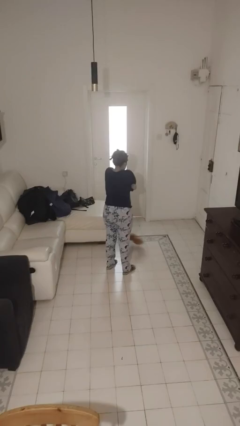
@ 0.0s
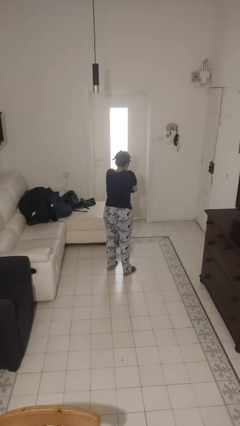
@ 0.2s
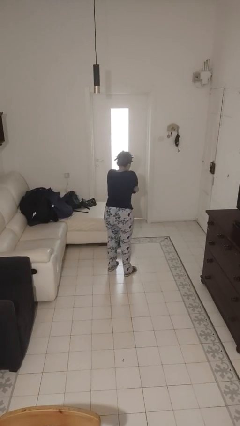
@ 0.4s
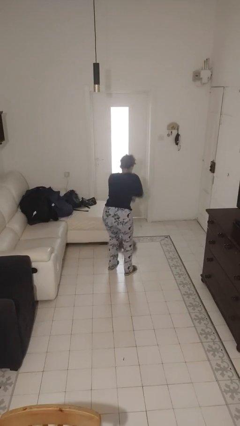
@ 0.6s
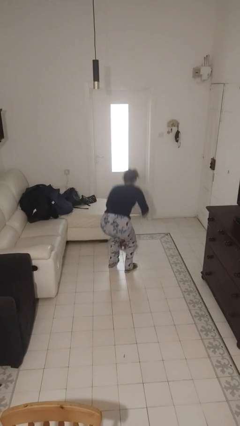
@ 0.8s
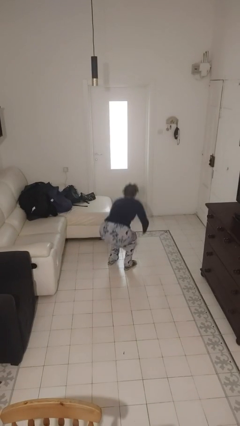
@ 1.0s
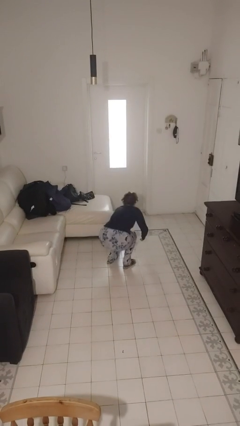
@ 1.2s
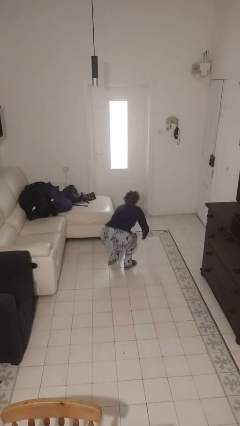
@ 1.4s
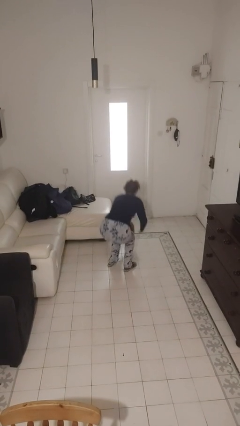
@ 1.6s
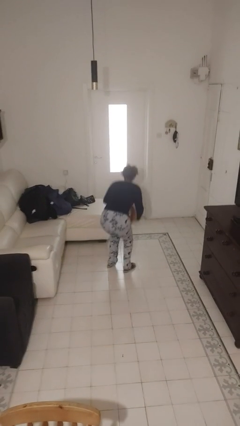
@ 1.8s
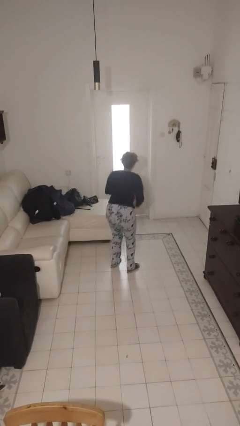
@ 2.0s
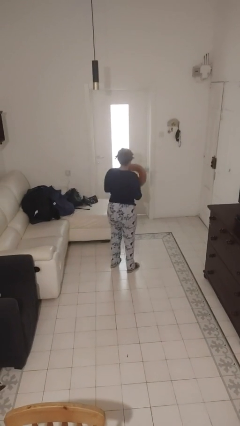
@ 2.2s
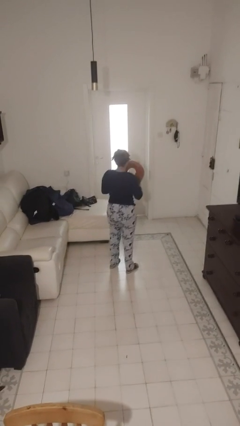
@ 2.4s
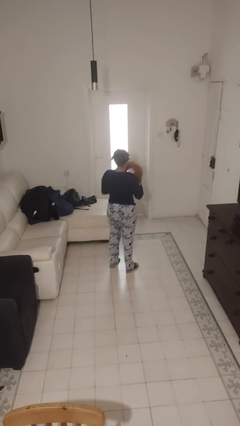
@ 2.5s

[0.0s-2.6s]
person picks up object from floor

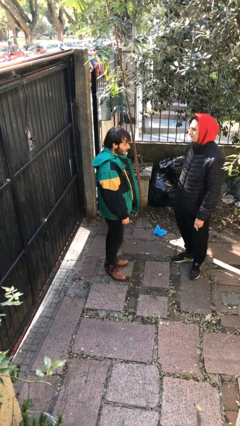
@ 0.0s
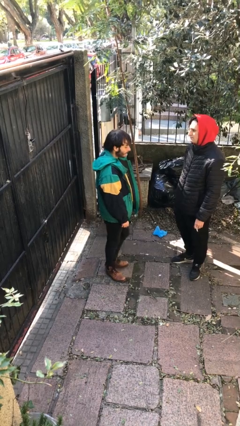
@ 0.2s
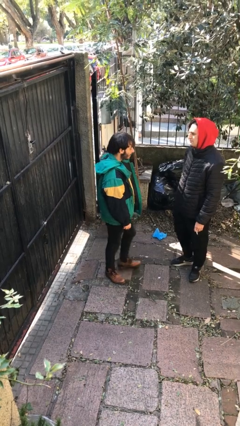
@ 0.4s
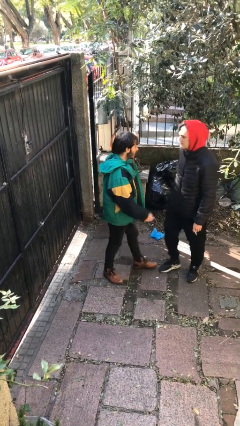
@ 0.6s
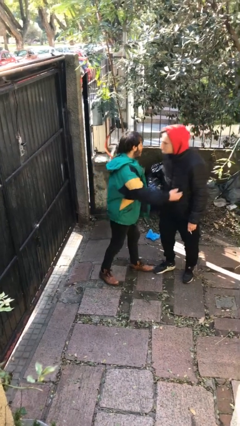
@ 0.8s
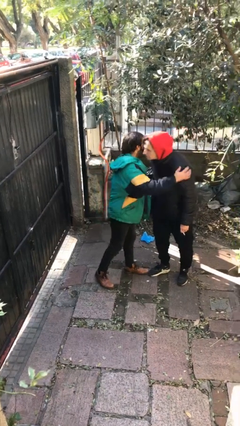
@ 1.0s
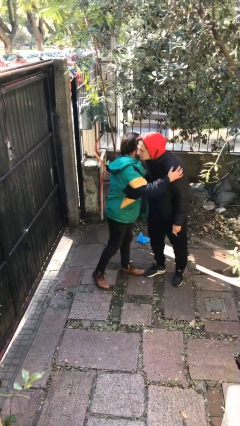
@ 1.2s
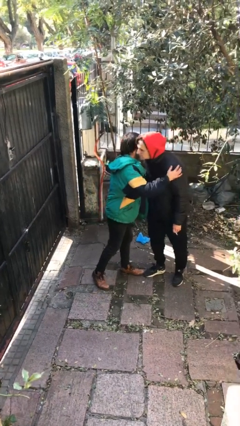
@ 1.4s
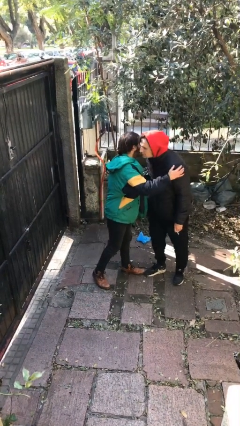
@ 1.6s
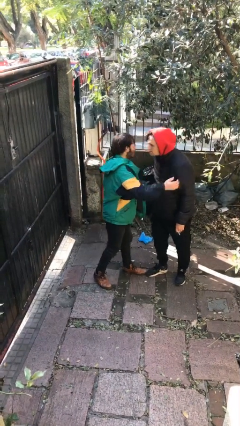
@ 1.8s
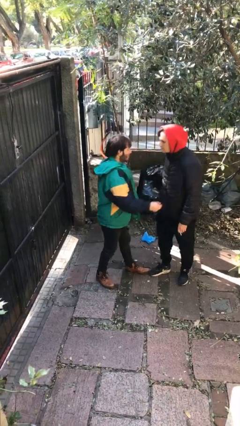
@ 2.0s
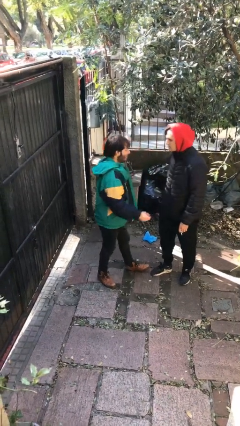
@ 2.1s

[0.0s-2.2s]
person kisses cheek of person

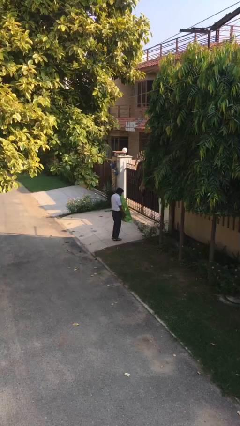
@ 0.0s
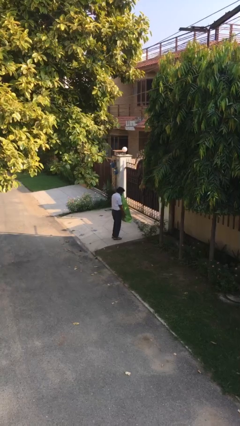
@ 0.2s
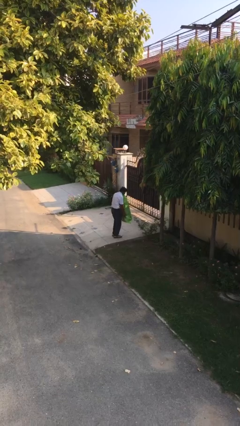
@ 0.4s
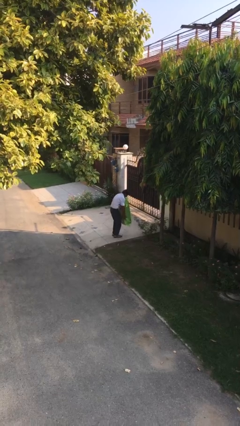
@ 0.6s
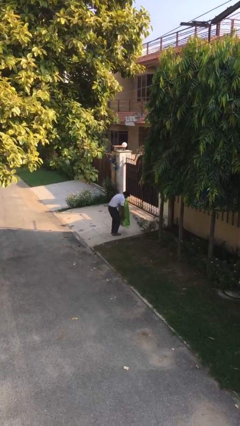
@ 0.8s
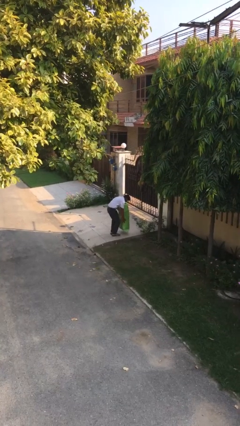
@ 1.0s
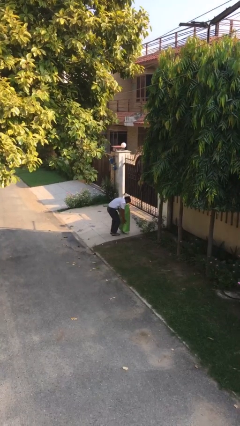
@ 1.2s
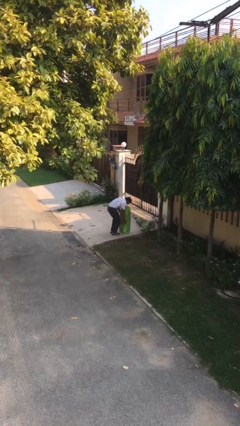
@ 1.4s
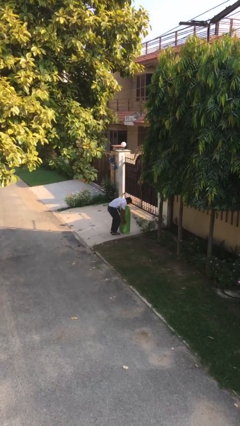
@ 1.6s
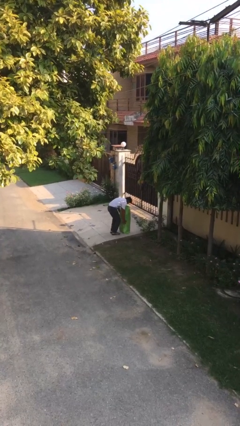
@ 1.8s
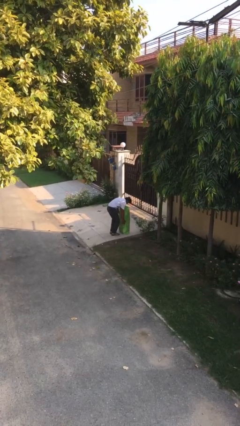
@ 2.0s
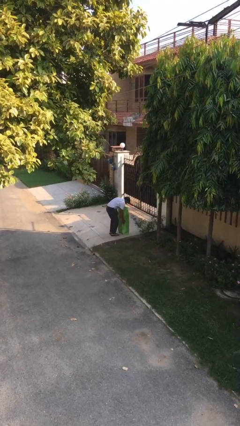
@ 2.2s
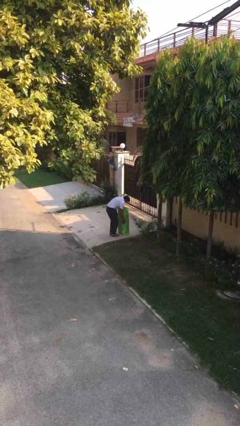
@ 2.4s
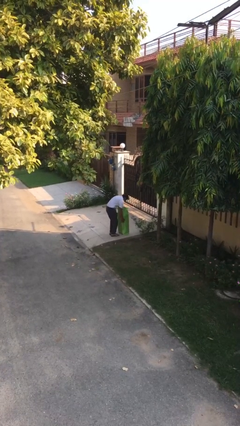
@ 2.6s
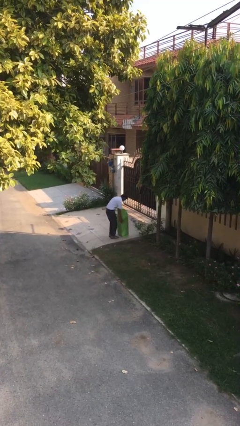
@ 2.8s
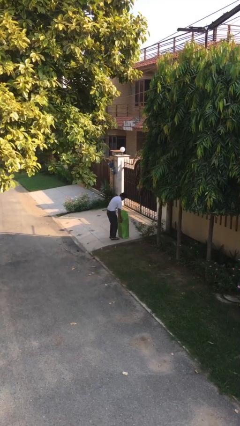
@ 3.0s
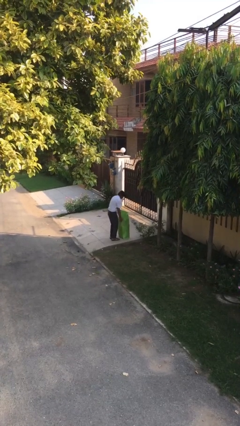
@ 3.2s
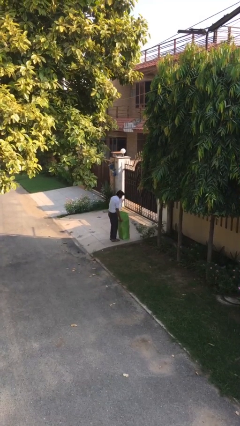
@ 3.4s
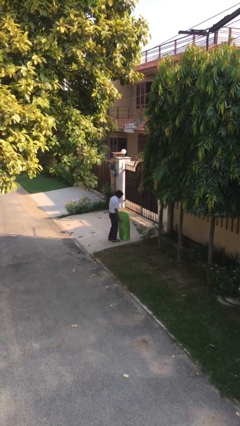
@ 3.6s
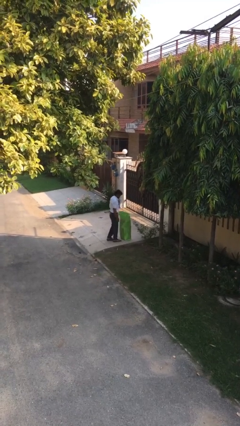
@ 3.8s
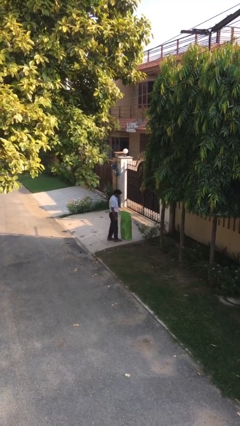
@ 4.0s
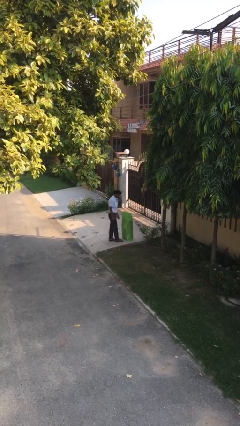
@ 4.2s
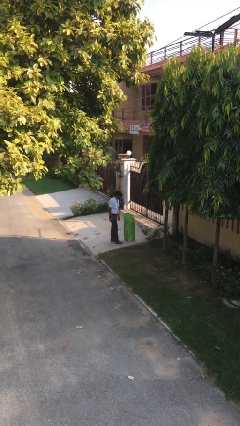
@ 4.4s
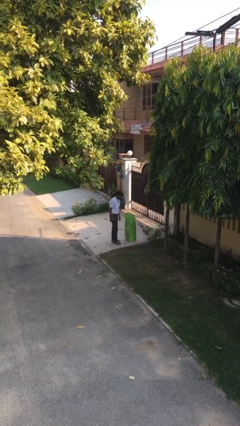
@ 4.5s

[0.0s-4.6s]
person puts down object on floor

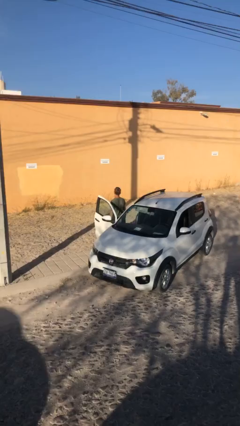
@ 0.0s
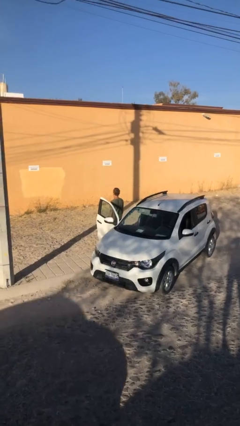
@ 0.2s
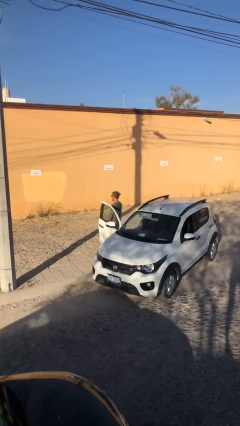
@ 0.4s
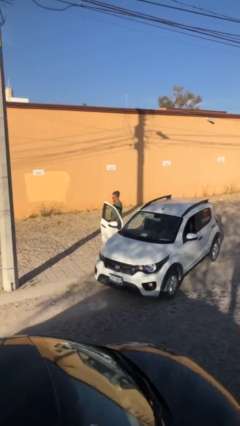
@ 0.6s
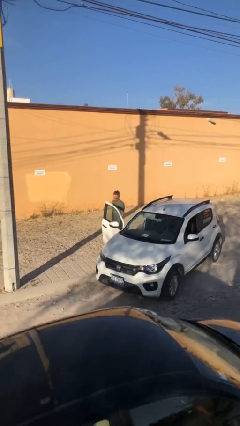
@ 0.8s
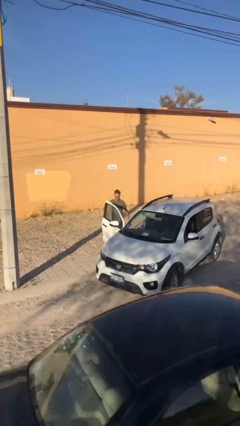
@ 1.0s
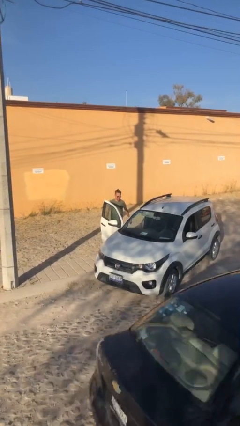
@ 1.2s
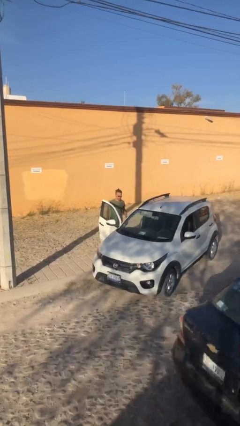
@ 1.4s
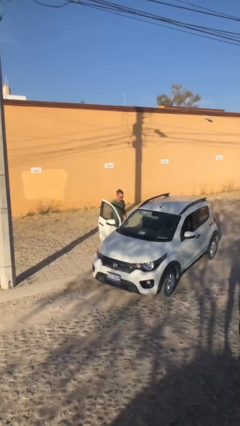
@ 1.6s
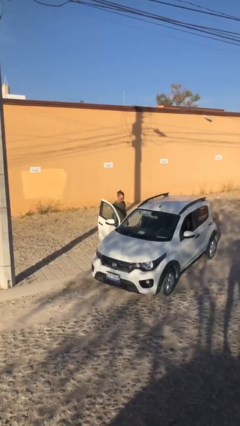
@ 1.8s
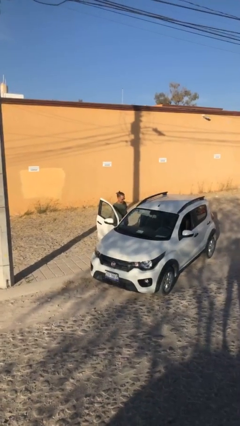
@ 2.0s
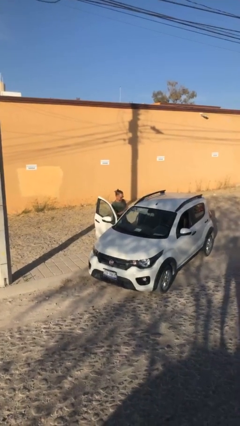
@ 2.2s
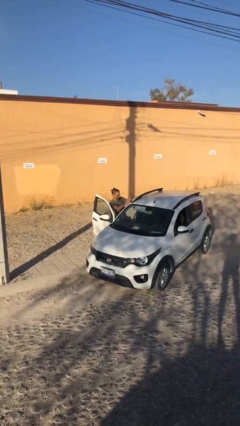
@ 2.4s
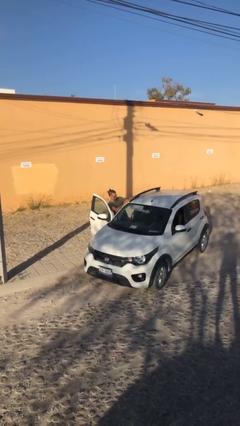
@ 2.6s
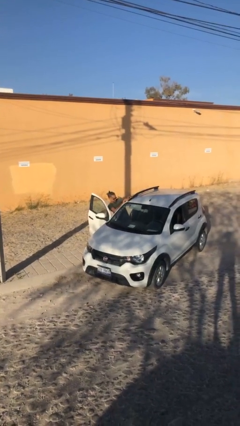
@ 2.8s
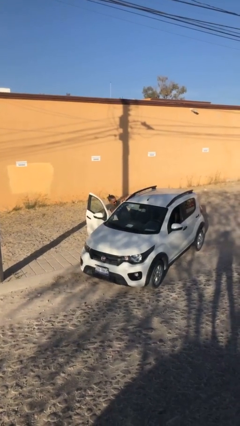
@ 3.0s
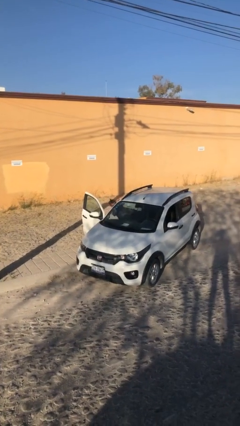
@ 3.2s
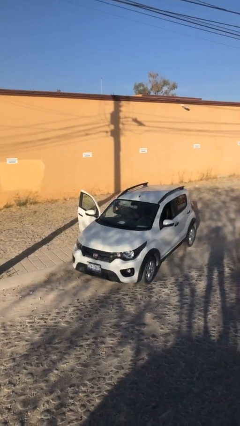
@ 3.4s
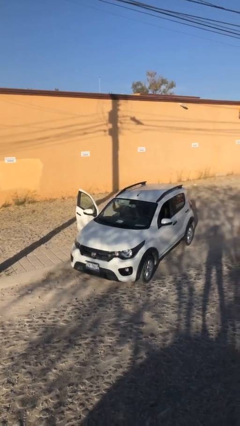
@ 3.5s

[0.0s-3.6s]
person enters car

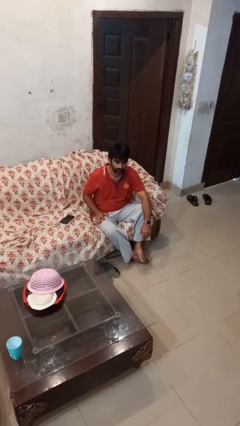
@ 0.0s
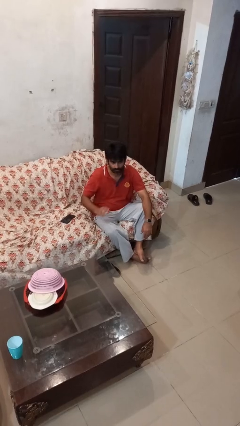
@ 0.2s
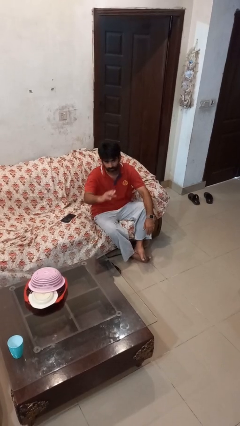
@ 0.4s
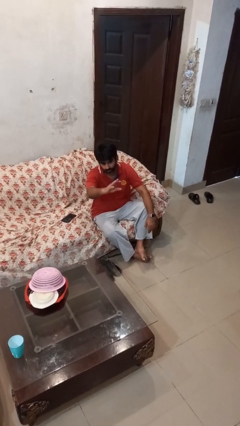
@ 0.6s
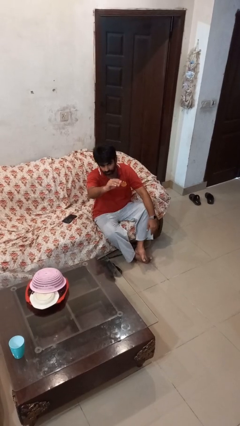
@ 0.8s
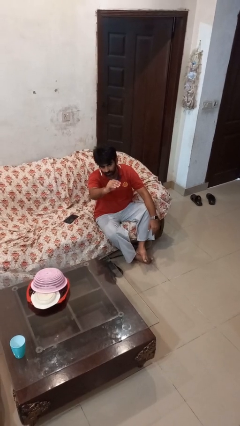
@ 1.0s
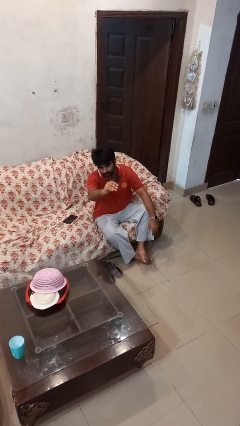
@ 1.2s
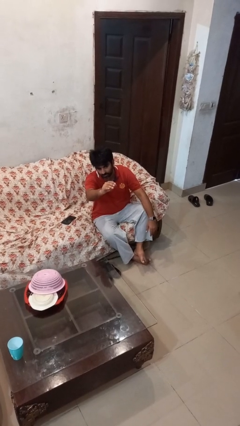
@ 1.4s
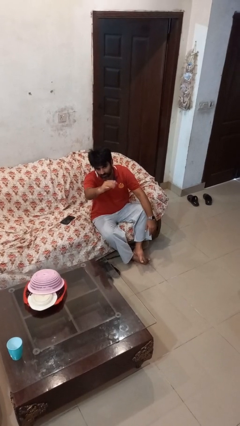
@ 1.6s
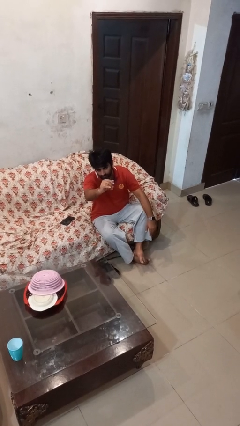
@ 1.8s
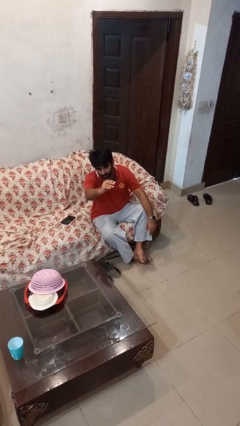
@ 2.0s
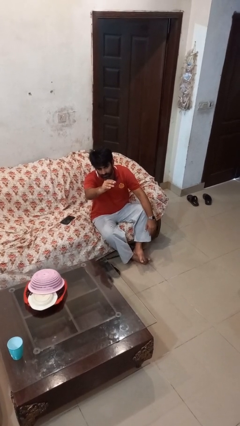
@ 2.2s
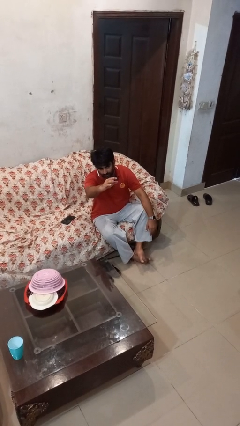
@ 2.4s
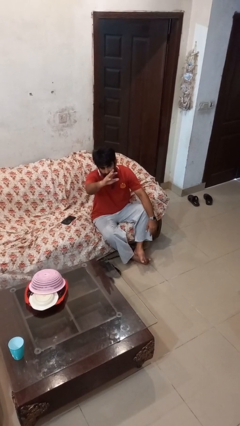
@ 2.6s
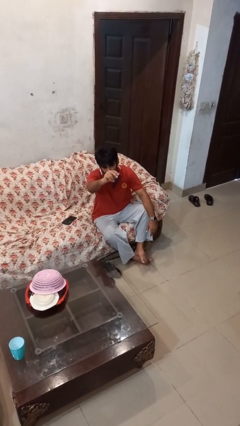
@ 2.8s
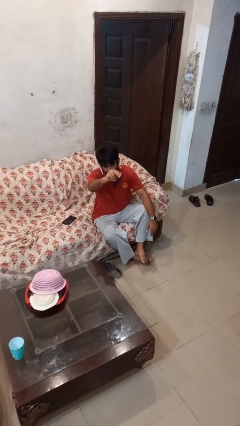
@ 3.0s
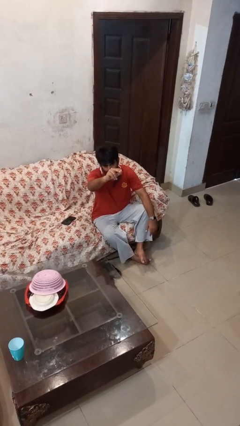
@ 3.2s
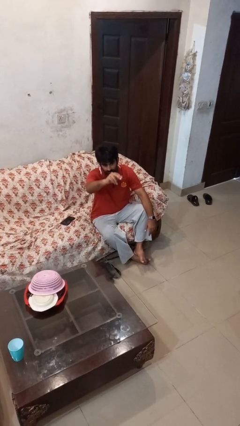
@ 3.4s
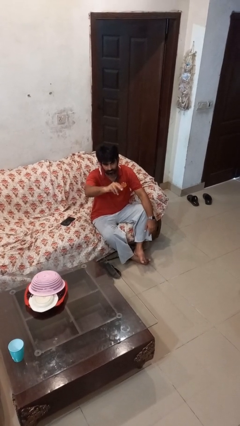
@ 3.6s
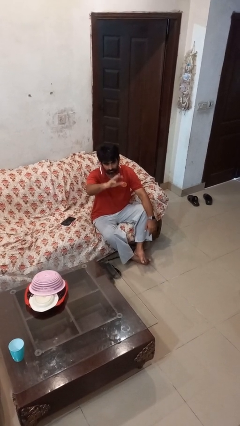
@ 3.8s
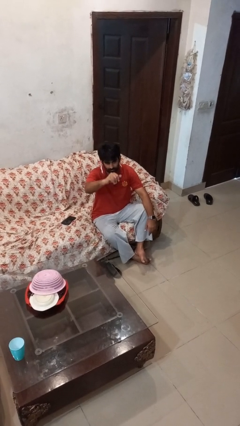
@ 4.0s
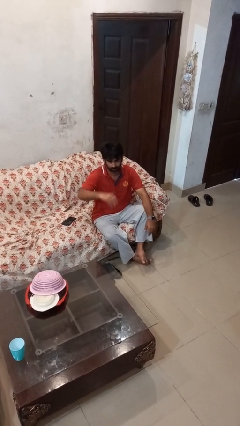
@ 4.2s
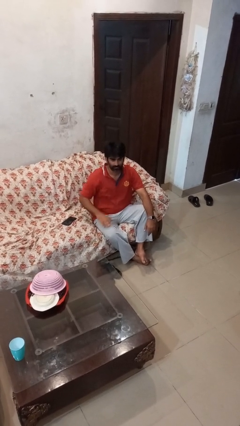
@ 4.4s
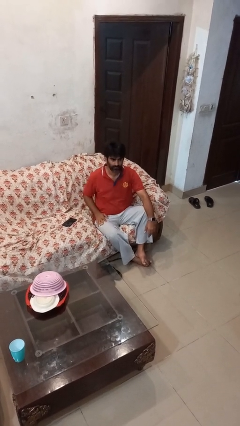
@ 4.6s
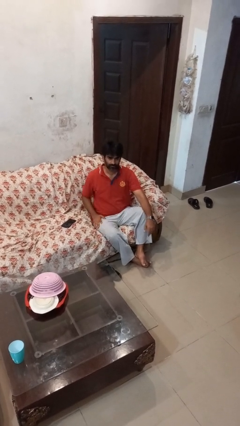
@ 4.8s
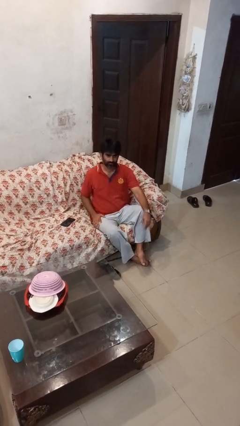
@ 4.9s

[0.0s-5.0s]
person gestures come here
